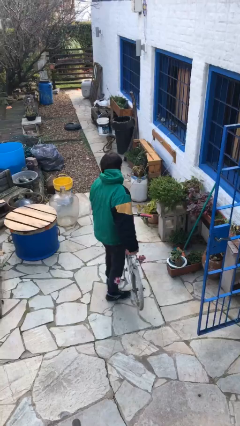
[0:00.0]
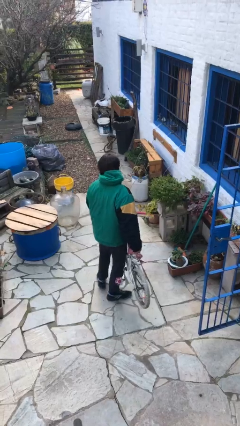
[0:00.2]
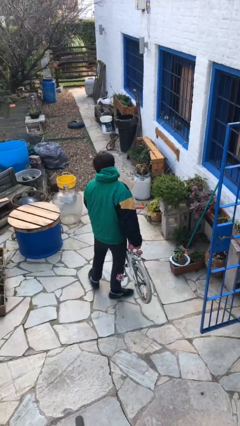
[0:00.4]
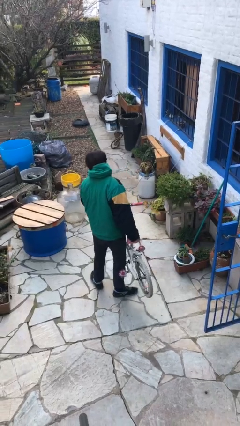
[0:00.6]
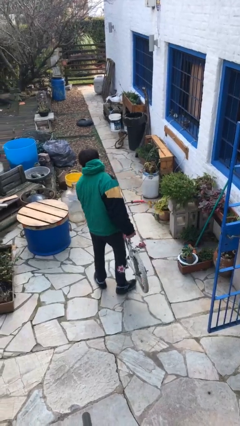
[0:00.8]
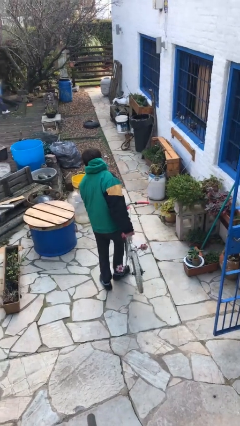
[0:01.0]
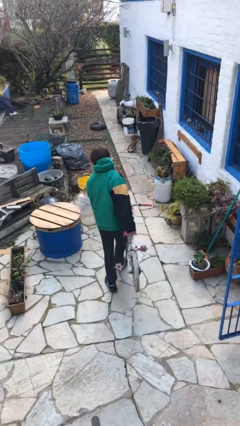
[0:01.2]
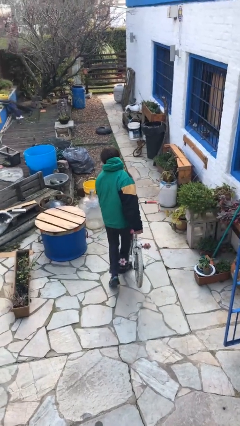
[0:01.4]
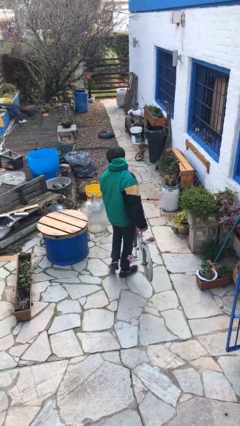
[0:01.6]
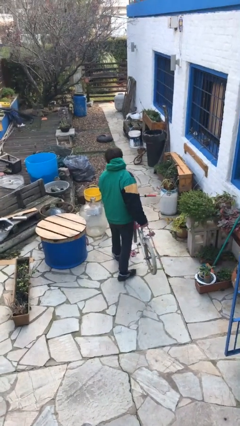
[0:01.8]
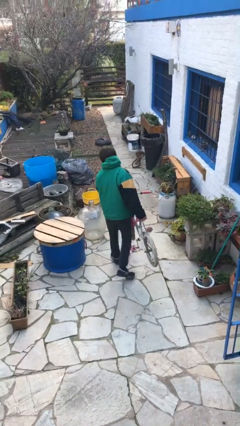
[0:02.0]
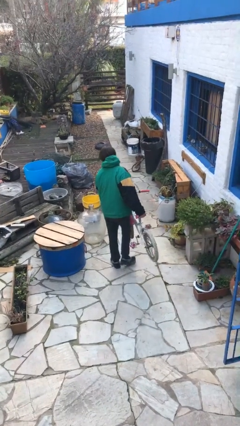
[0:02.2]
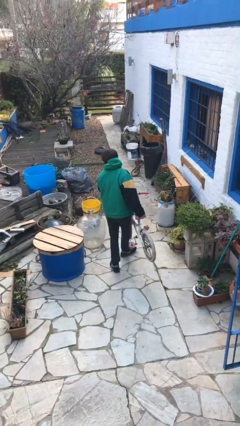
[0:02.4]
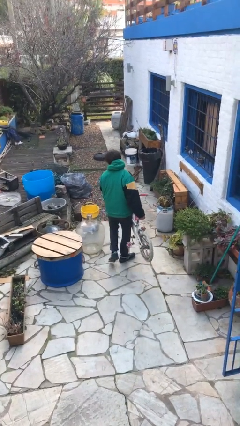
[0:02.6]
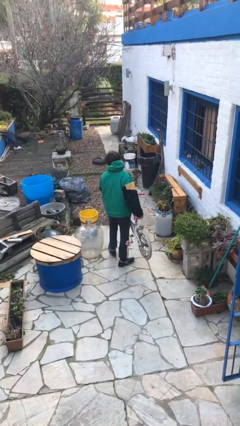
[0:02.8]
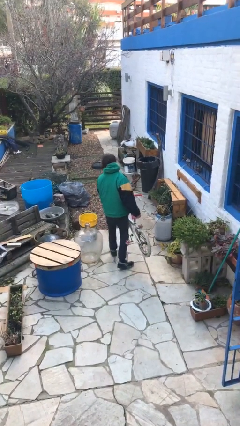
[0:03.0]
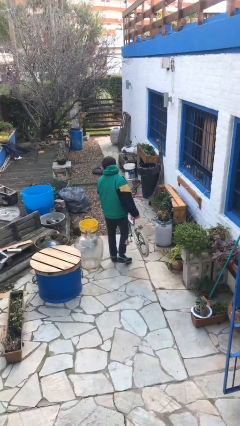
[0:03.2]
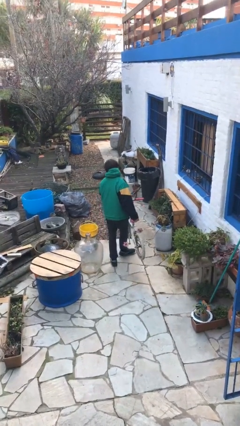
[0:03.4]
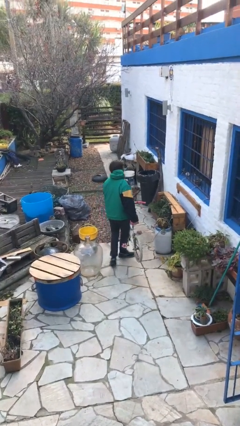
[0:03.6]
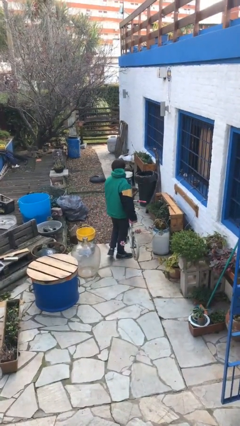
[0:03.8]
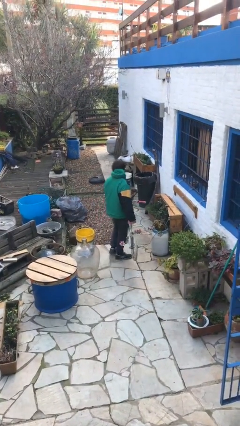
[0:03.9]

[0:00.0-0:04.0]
person carries bicycle

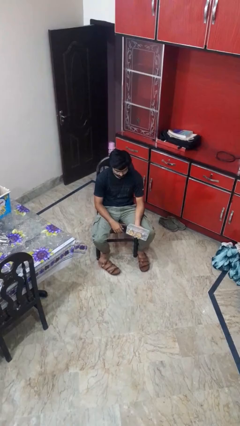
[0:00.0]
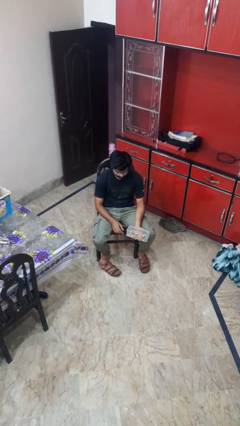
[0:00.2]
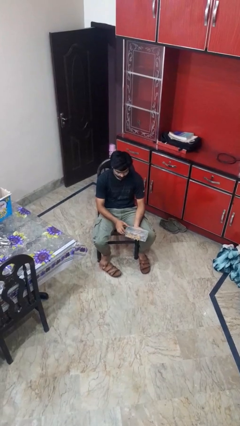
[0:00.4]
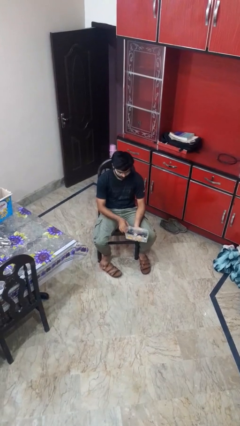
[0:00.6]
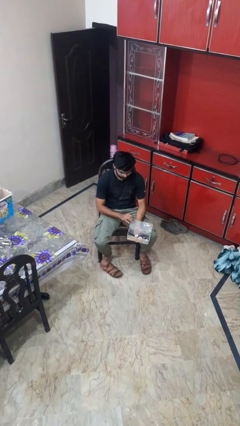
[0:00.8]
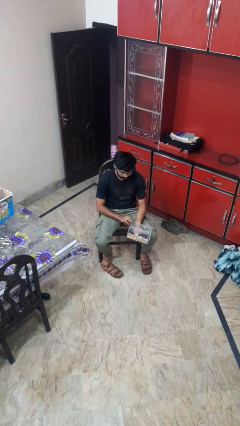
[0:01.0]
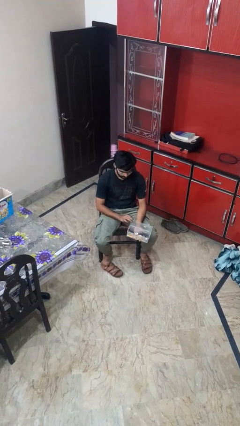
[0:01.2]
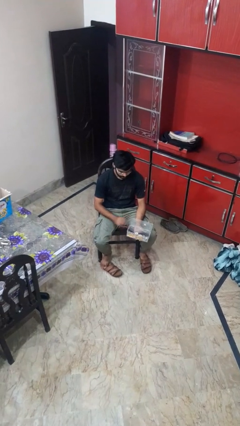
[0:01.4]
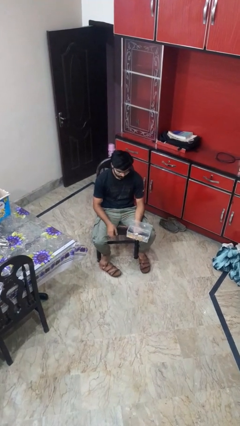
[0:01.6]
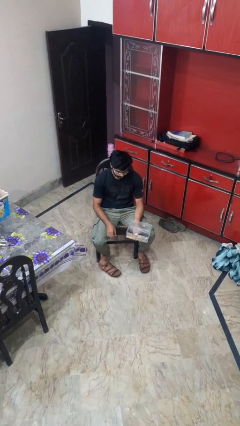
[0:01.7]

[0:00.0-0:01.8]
person opens jewelry box

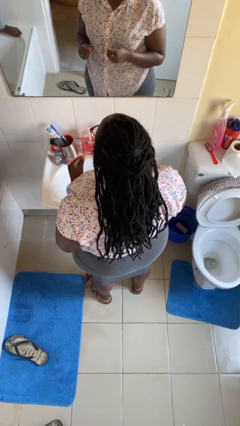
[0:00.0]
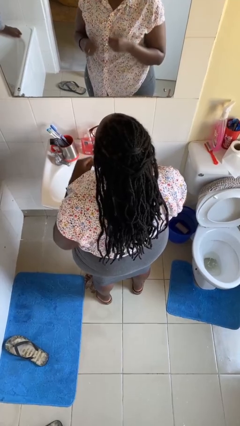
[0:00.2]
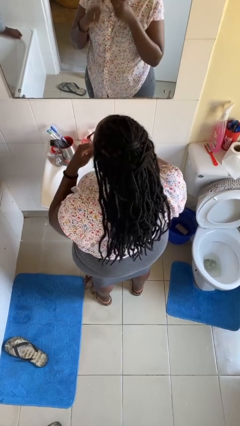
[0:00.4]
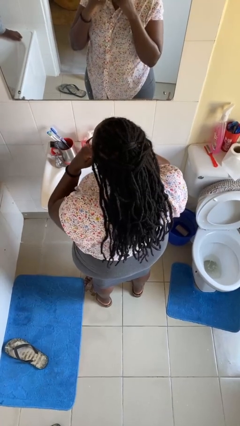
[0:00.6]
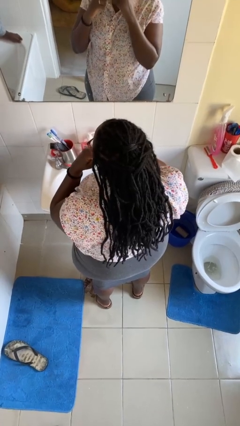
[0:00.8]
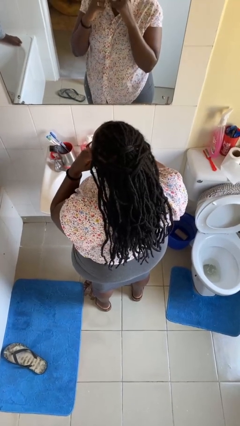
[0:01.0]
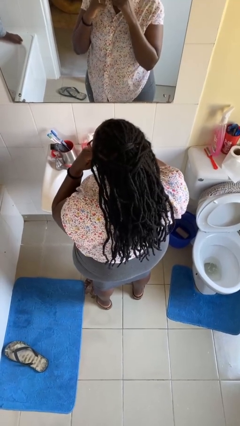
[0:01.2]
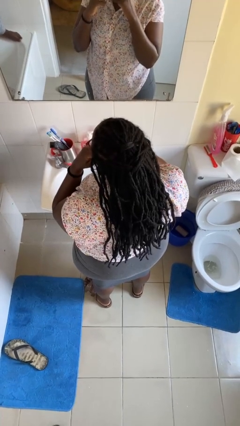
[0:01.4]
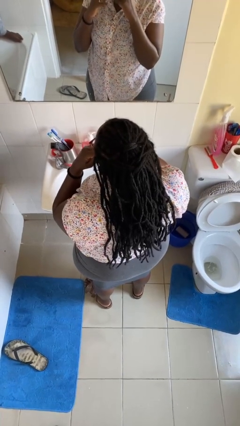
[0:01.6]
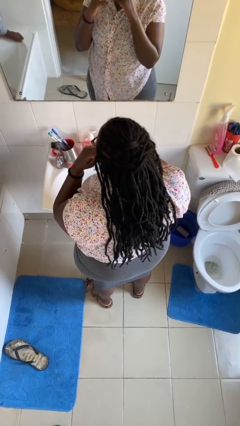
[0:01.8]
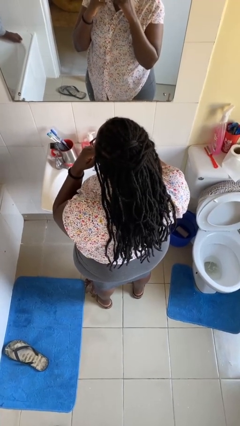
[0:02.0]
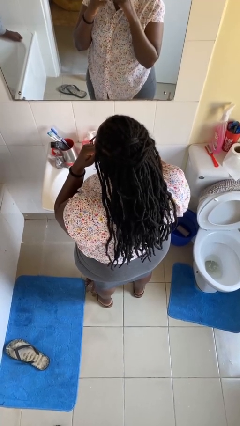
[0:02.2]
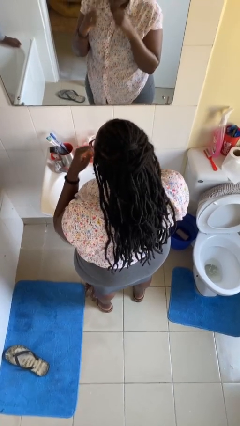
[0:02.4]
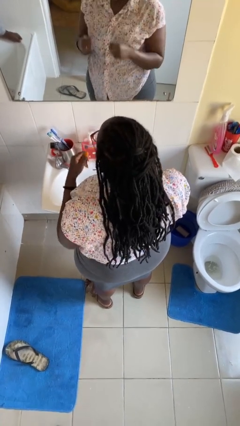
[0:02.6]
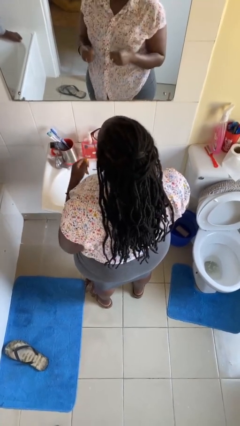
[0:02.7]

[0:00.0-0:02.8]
person flosses

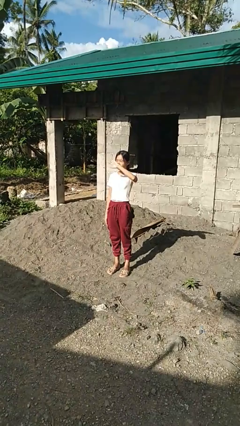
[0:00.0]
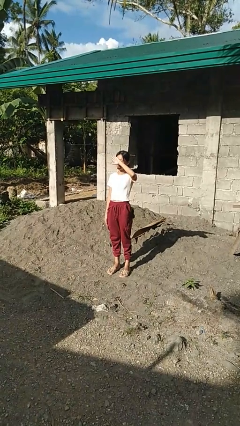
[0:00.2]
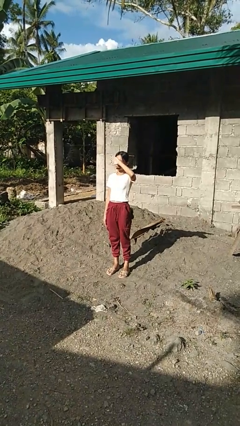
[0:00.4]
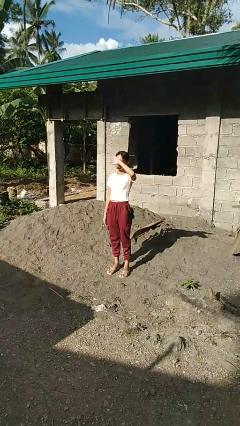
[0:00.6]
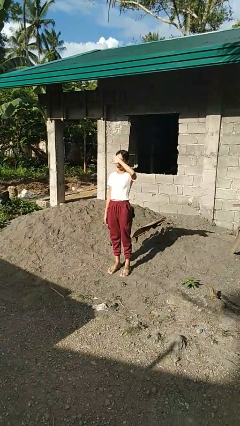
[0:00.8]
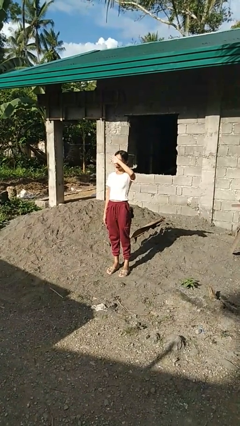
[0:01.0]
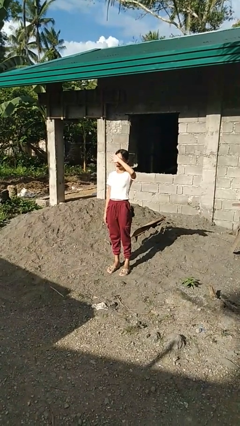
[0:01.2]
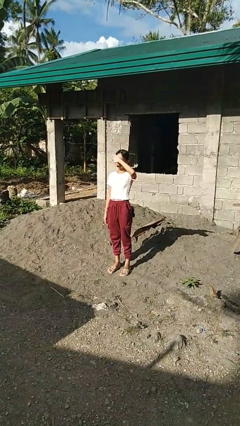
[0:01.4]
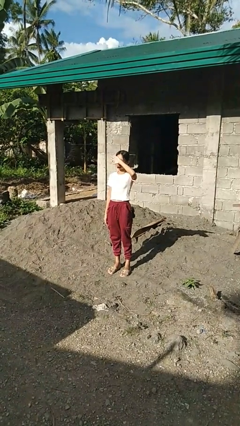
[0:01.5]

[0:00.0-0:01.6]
person shades eyes

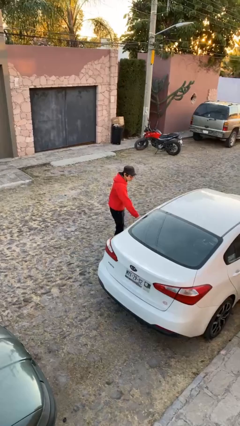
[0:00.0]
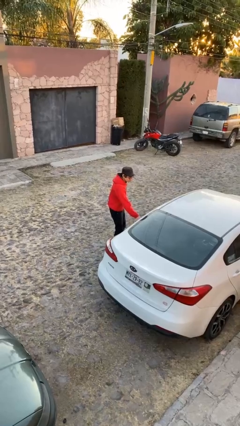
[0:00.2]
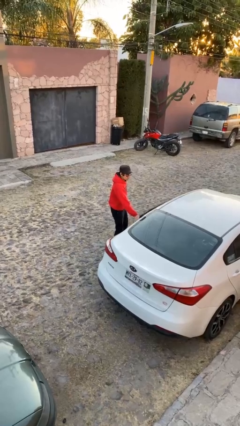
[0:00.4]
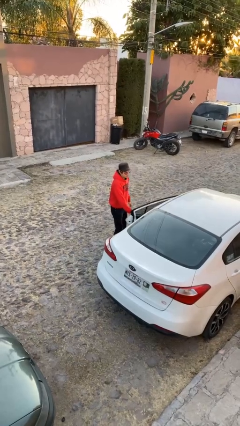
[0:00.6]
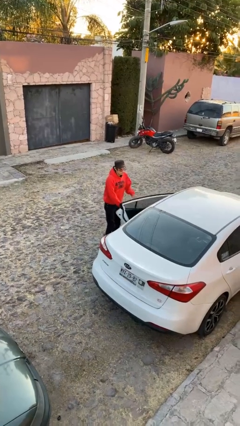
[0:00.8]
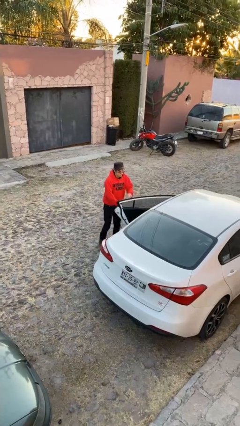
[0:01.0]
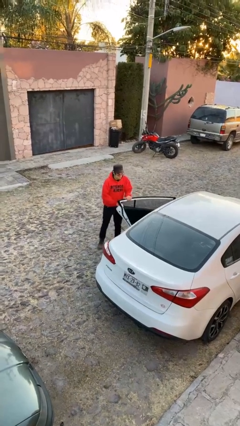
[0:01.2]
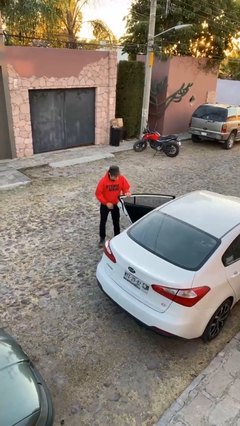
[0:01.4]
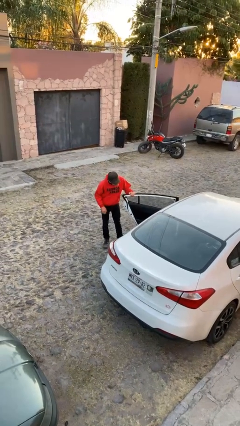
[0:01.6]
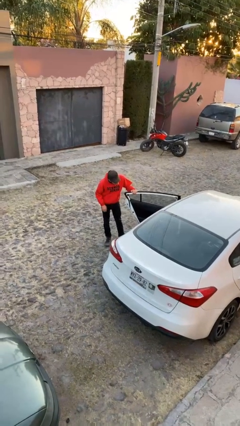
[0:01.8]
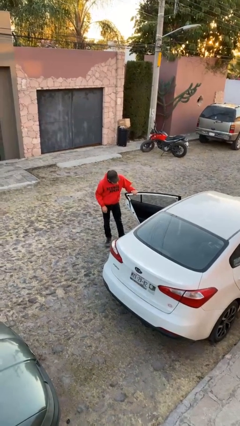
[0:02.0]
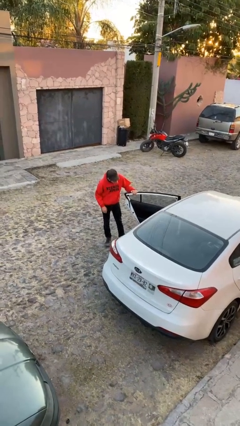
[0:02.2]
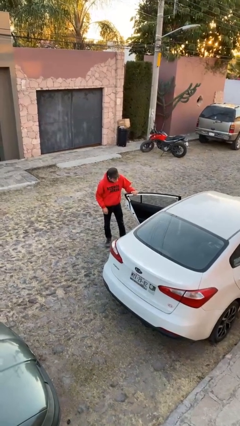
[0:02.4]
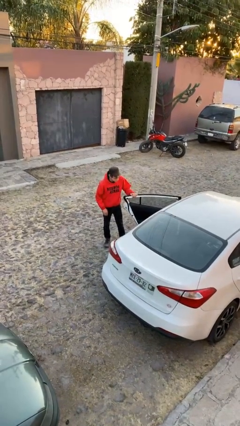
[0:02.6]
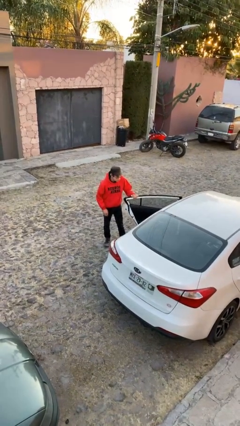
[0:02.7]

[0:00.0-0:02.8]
person opens car door

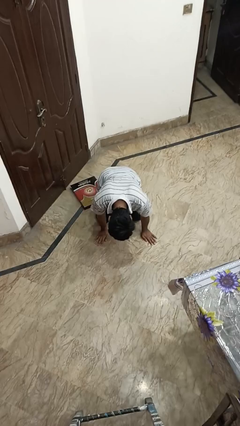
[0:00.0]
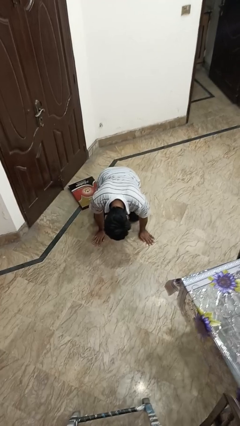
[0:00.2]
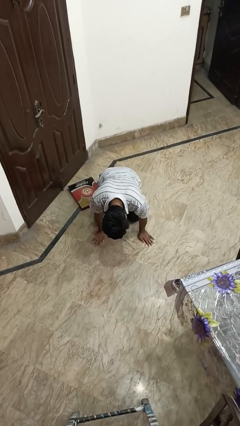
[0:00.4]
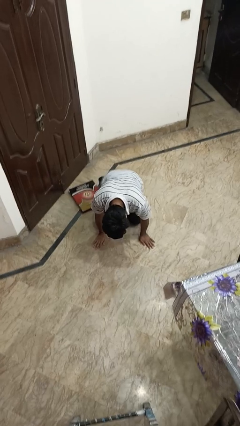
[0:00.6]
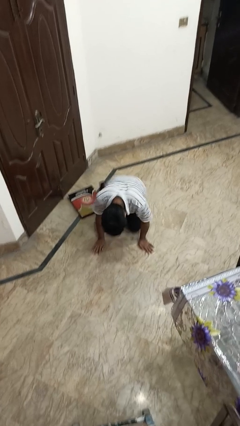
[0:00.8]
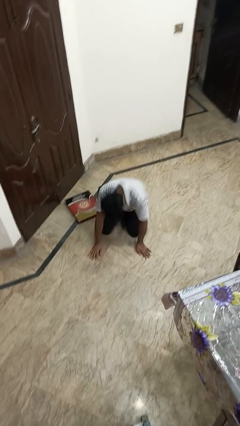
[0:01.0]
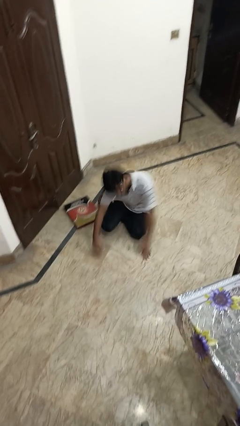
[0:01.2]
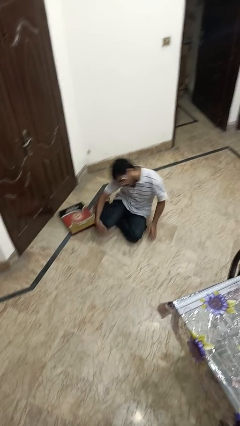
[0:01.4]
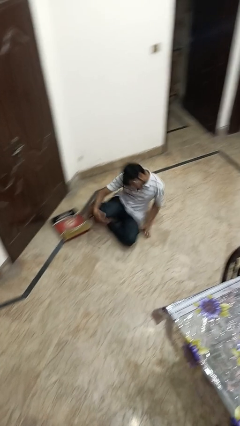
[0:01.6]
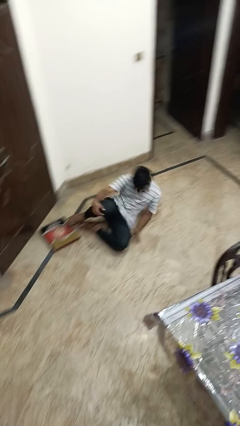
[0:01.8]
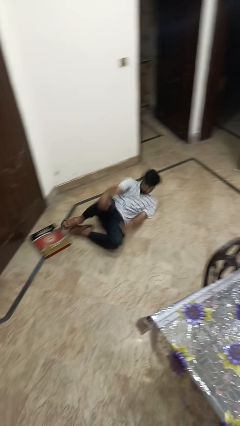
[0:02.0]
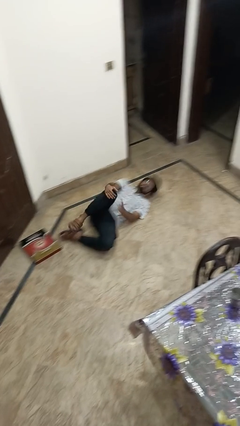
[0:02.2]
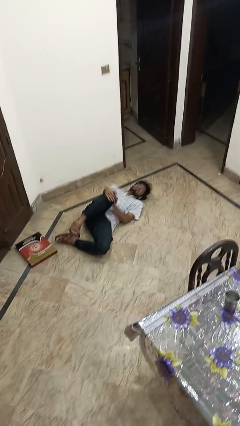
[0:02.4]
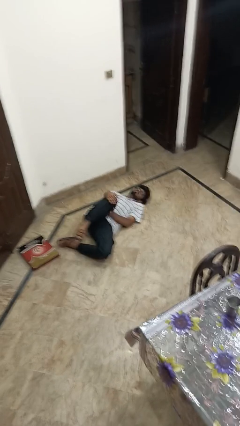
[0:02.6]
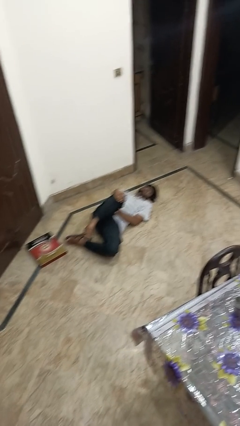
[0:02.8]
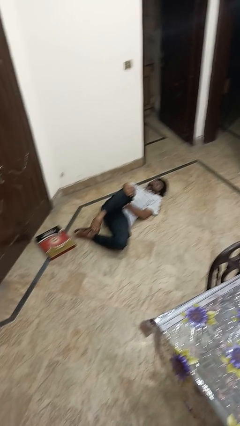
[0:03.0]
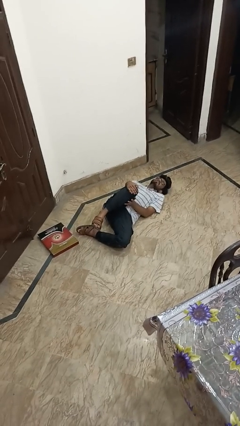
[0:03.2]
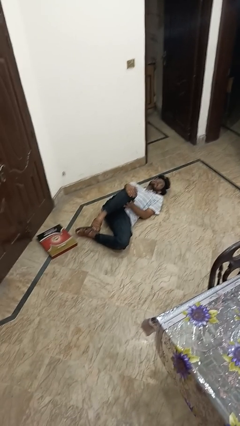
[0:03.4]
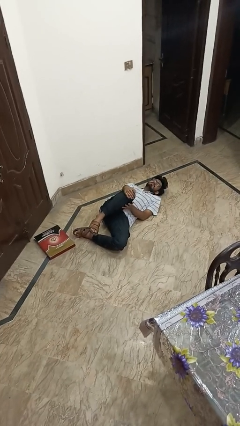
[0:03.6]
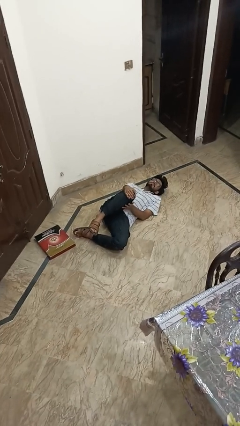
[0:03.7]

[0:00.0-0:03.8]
person lies down on floor

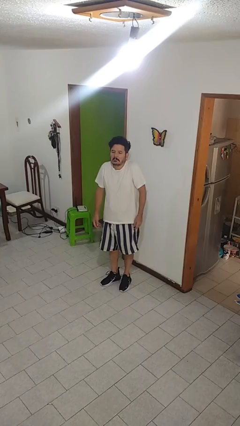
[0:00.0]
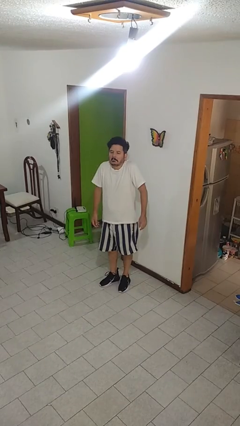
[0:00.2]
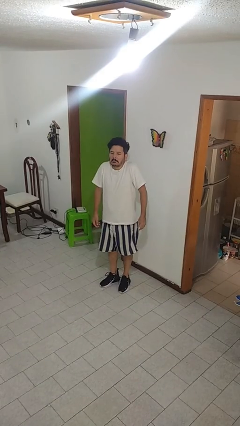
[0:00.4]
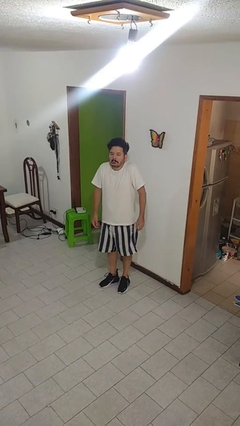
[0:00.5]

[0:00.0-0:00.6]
person shrugs
